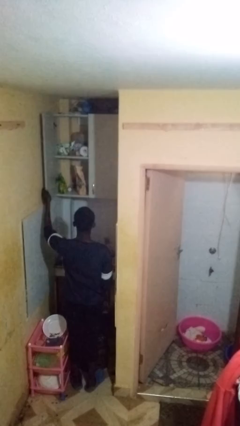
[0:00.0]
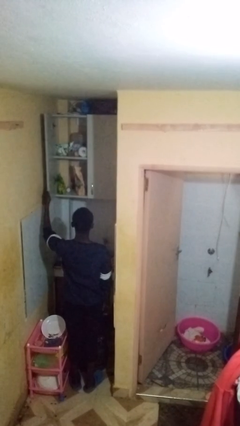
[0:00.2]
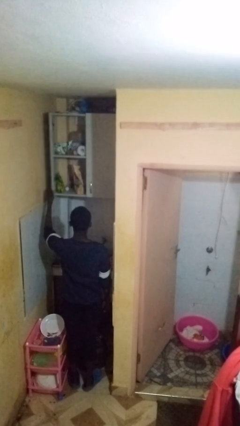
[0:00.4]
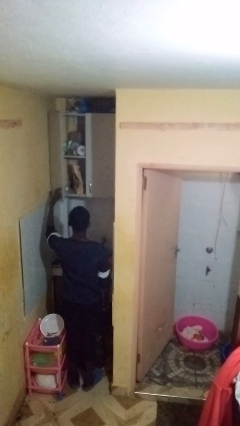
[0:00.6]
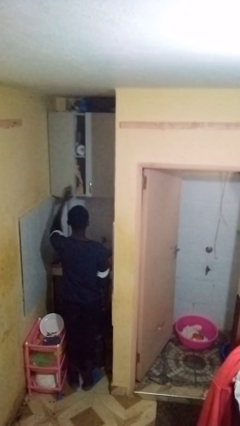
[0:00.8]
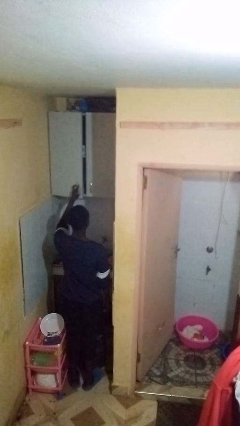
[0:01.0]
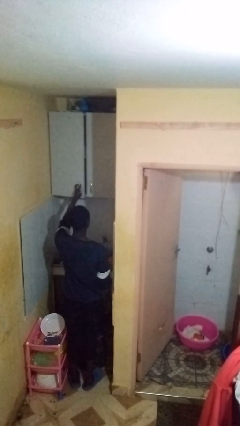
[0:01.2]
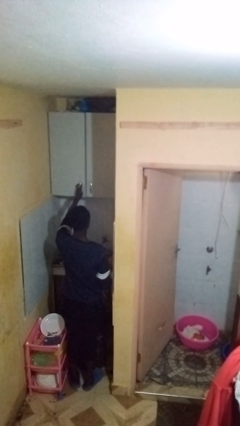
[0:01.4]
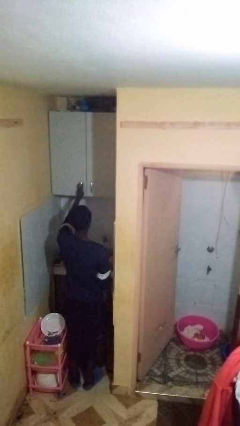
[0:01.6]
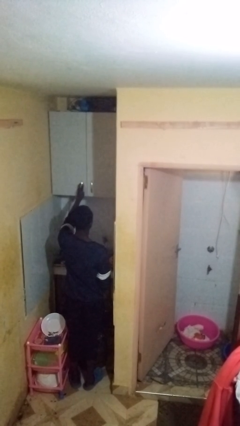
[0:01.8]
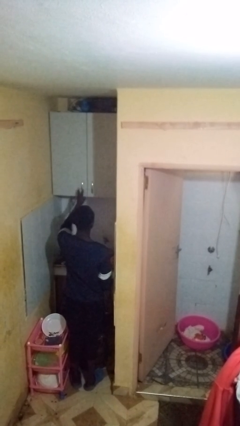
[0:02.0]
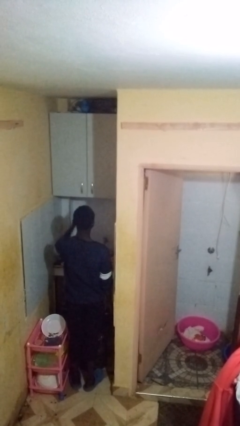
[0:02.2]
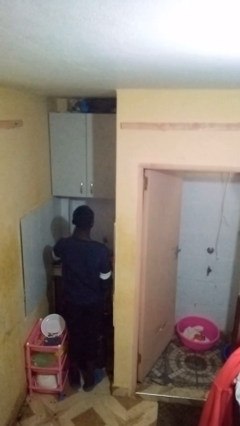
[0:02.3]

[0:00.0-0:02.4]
person closes cabinet

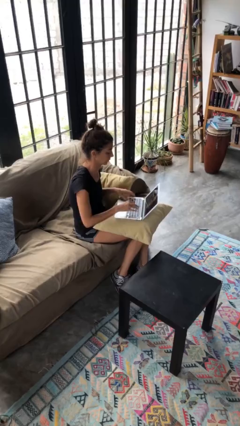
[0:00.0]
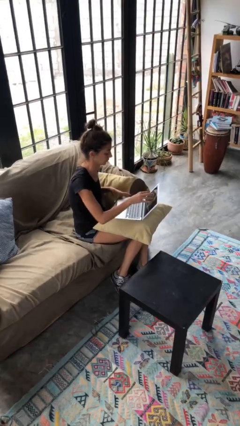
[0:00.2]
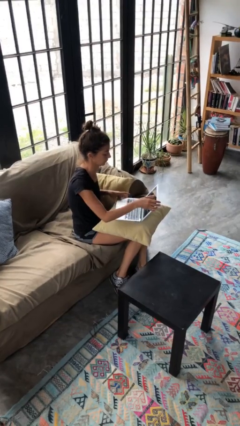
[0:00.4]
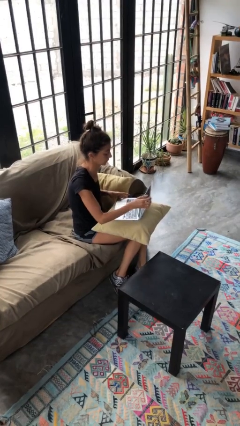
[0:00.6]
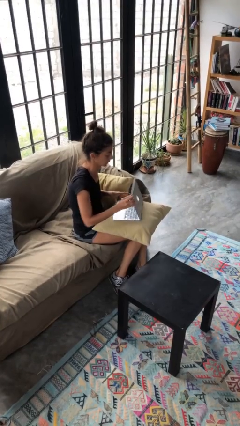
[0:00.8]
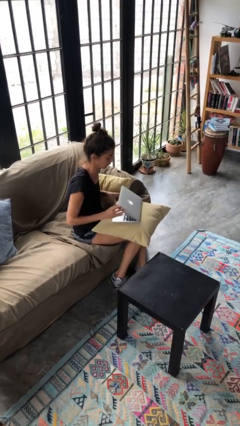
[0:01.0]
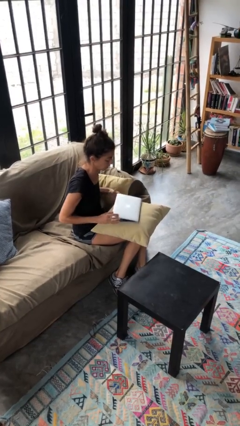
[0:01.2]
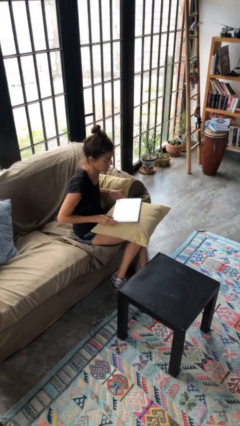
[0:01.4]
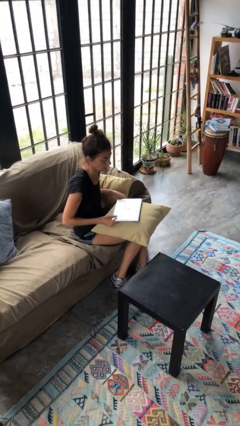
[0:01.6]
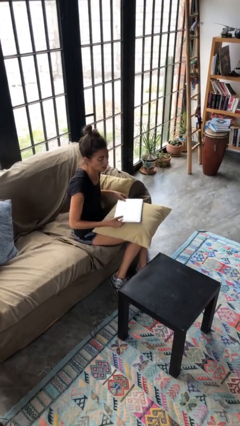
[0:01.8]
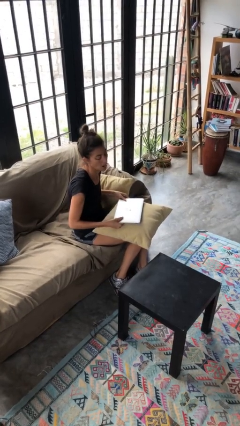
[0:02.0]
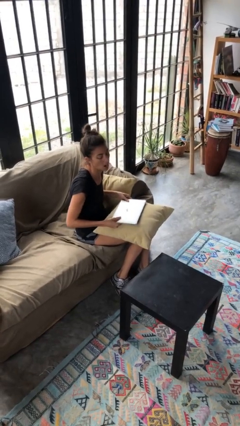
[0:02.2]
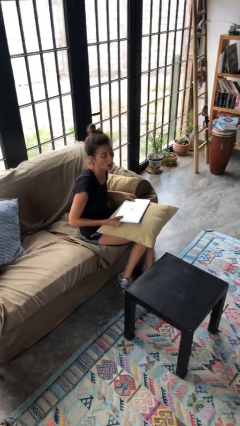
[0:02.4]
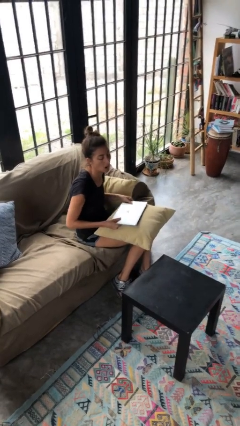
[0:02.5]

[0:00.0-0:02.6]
person closes laptop

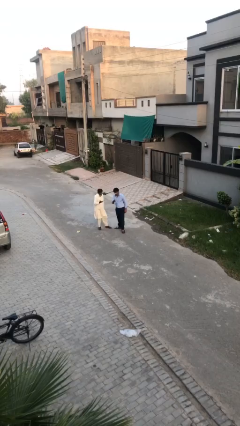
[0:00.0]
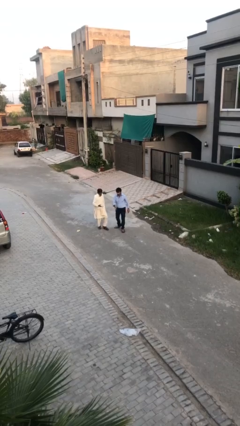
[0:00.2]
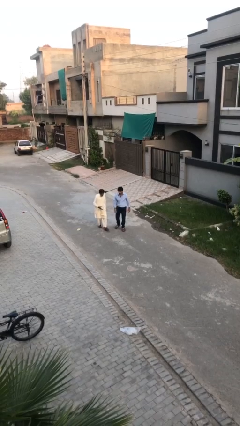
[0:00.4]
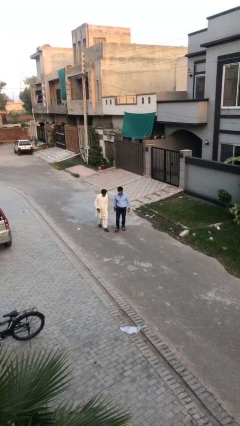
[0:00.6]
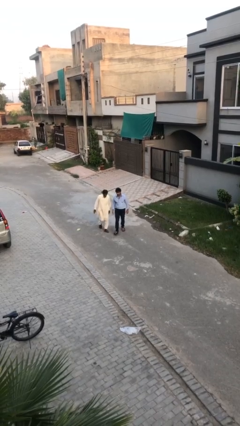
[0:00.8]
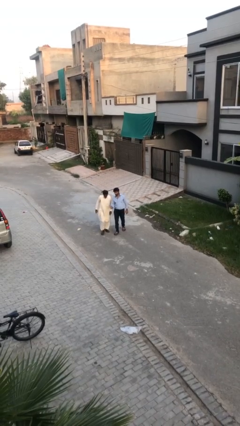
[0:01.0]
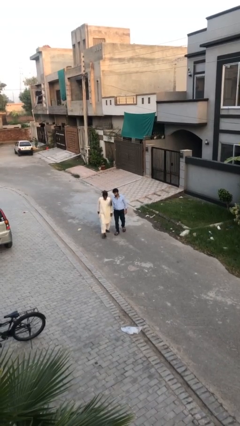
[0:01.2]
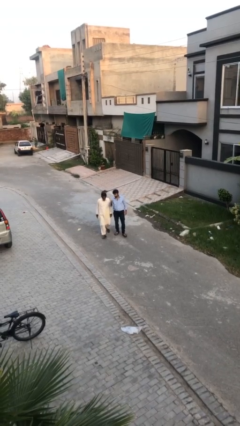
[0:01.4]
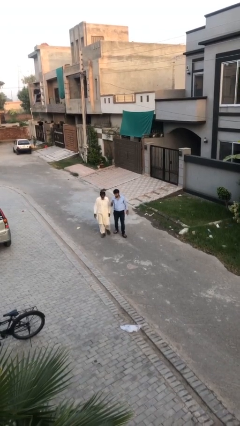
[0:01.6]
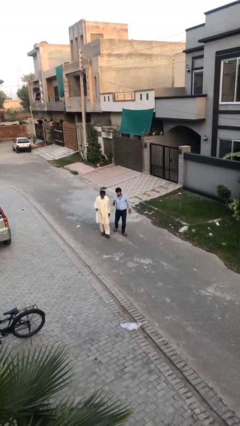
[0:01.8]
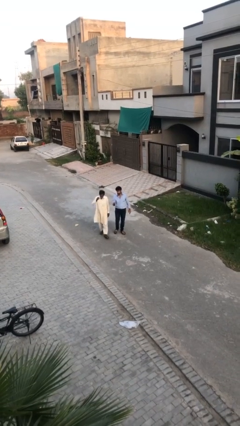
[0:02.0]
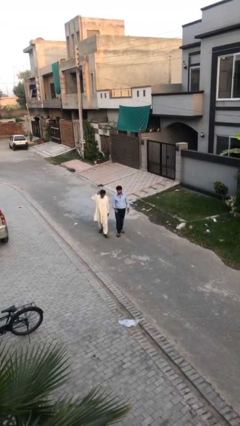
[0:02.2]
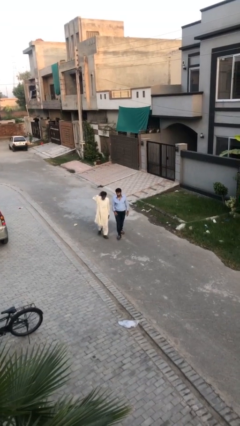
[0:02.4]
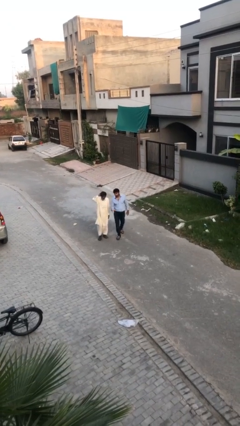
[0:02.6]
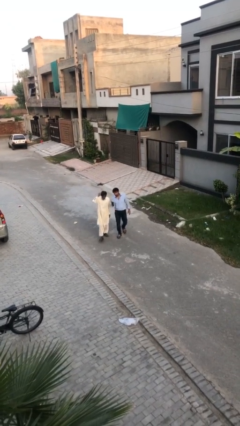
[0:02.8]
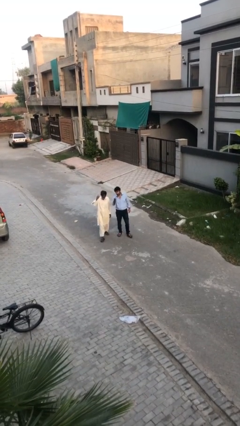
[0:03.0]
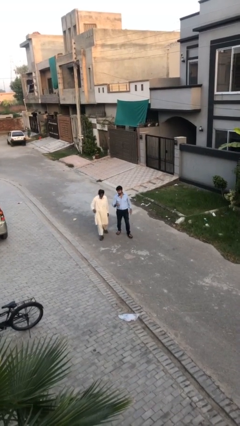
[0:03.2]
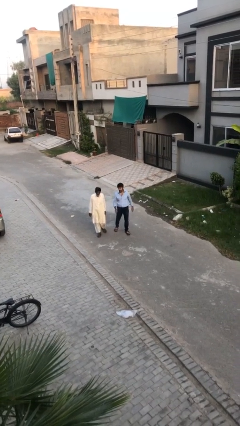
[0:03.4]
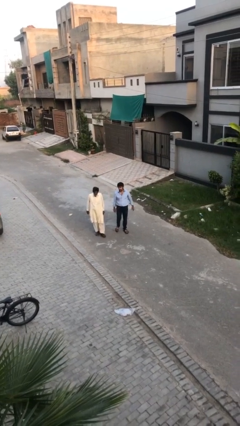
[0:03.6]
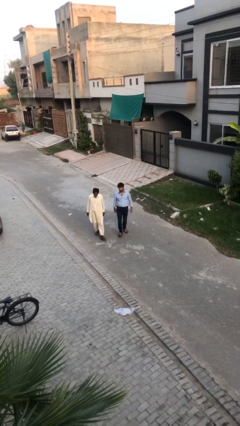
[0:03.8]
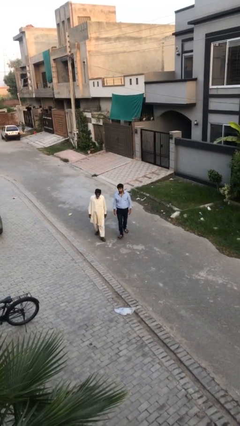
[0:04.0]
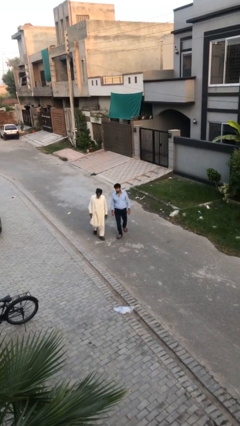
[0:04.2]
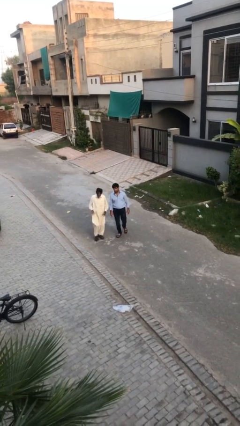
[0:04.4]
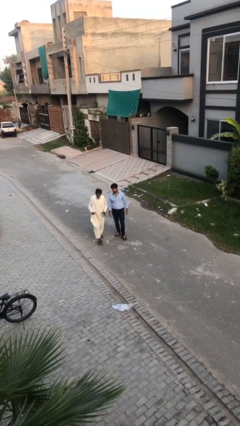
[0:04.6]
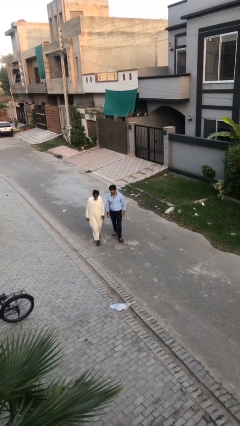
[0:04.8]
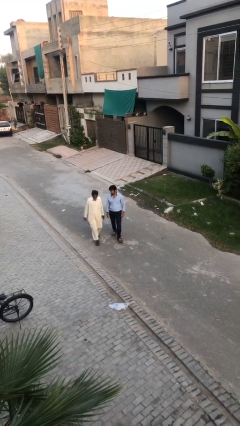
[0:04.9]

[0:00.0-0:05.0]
person talks to person

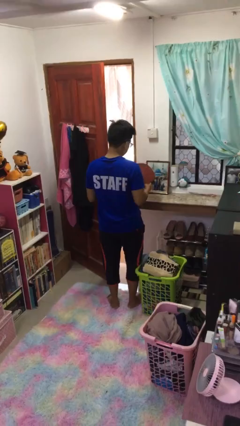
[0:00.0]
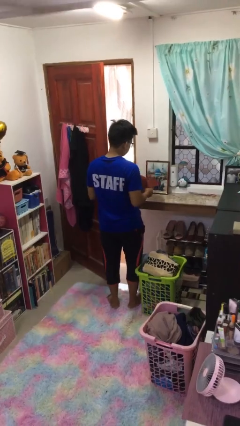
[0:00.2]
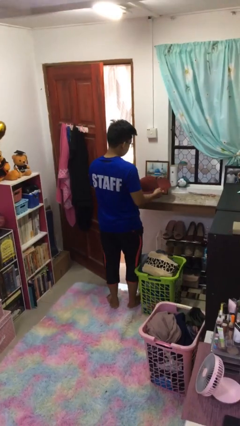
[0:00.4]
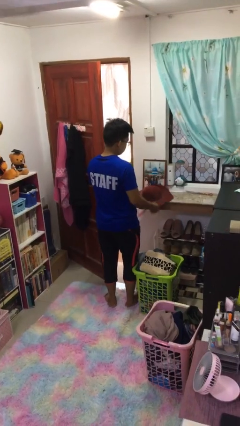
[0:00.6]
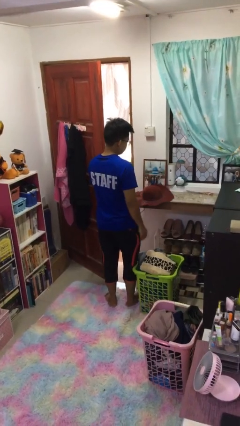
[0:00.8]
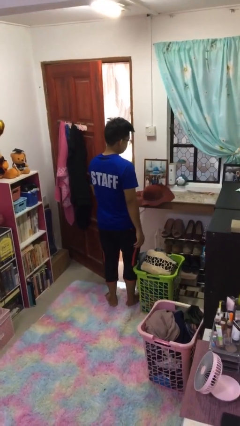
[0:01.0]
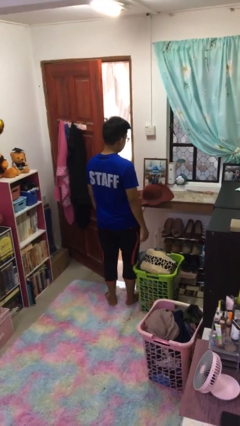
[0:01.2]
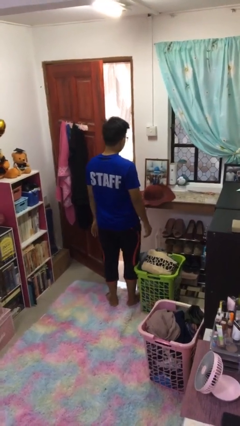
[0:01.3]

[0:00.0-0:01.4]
person puts down object on countertop

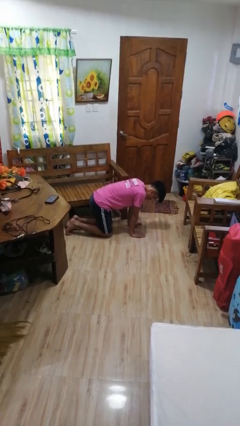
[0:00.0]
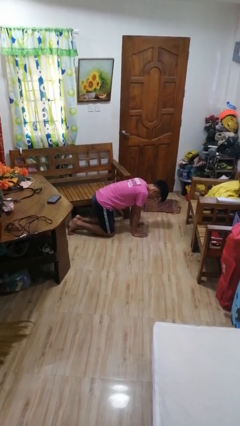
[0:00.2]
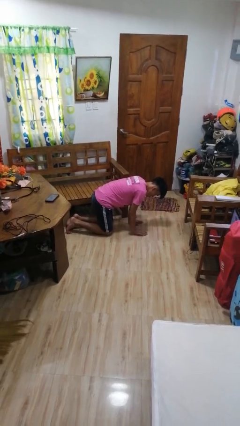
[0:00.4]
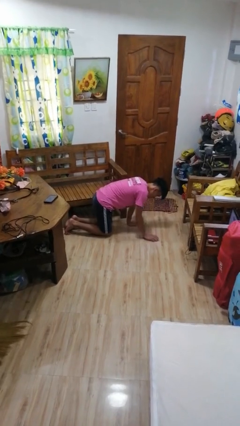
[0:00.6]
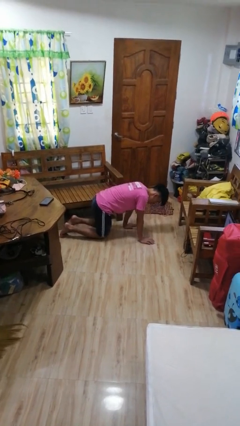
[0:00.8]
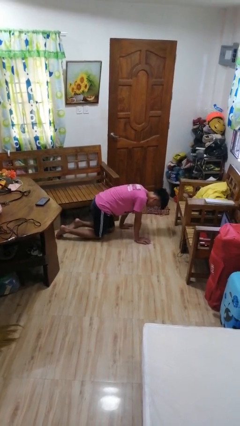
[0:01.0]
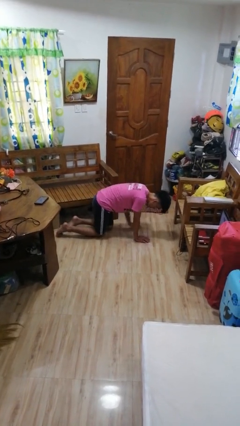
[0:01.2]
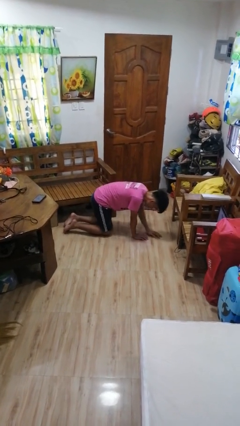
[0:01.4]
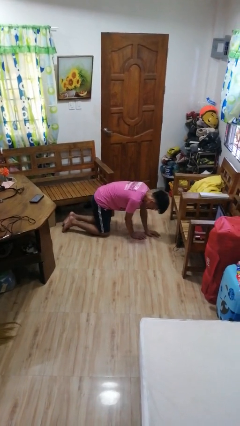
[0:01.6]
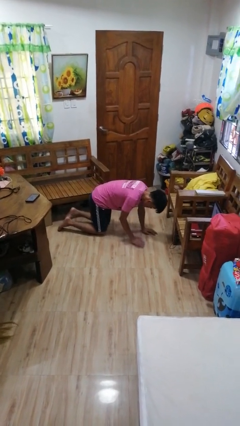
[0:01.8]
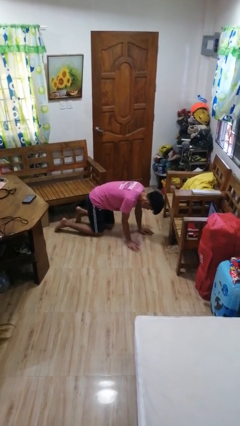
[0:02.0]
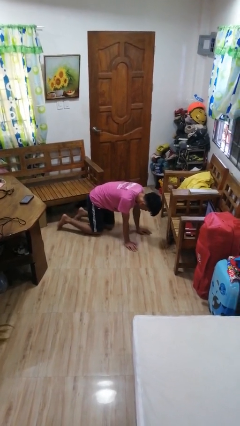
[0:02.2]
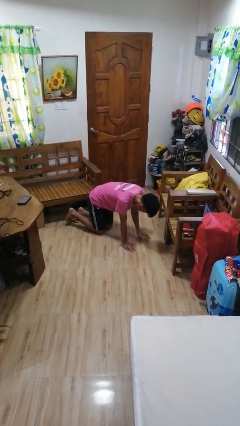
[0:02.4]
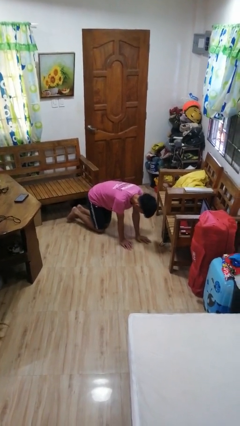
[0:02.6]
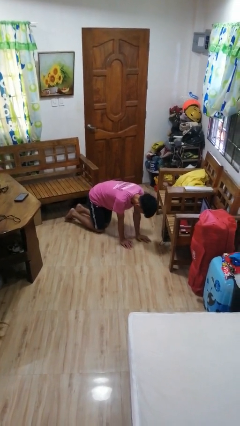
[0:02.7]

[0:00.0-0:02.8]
person crawls

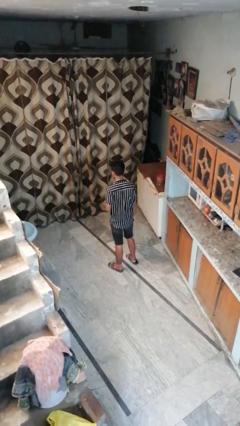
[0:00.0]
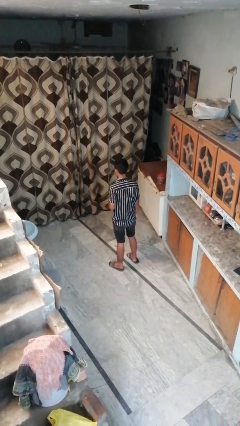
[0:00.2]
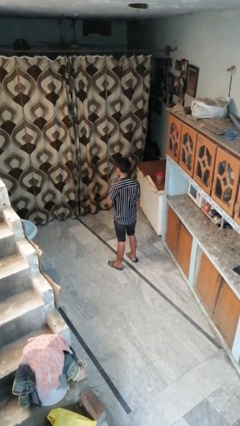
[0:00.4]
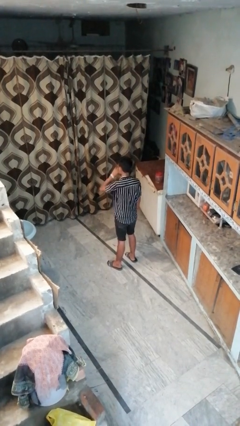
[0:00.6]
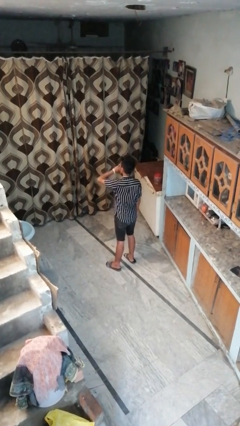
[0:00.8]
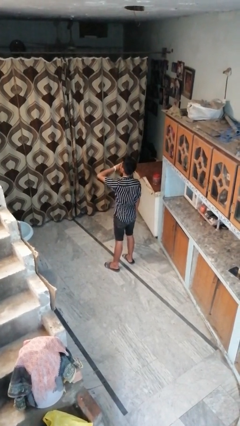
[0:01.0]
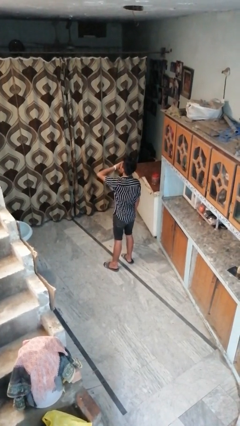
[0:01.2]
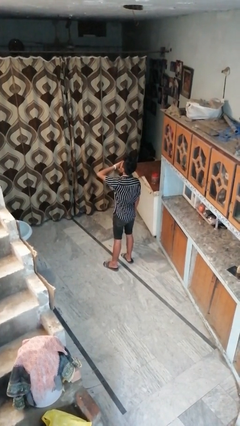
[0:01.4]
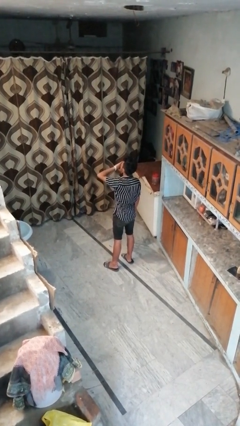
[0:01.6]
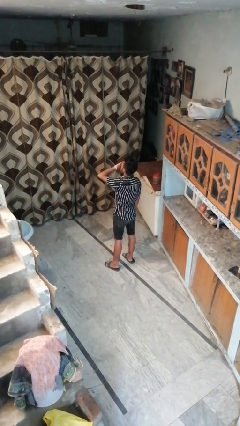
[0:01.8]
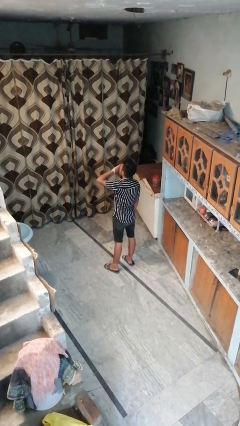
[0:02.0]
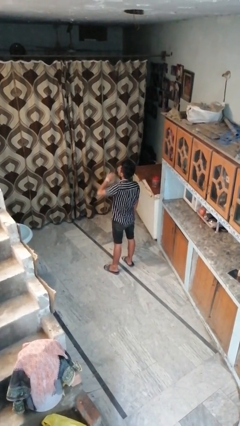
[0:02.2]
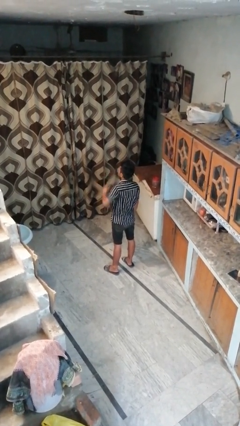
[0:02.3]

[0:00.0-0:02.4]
person yawns

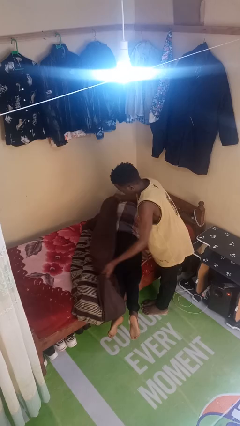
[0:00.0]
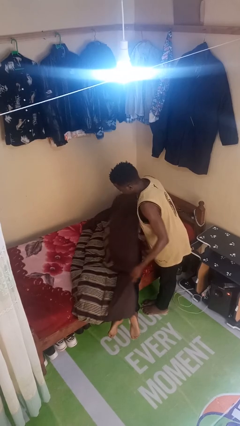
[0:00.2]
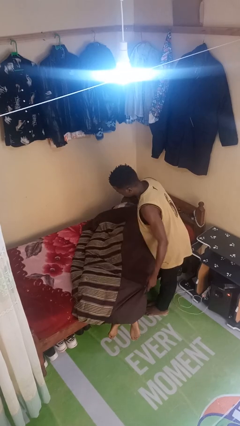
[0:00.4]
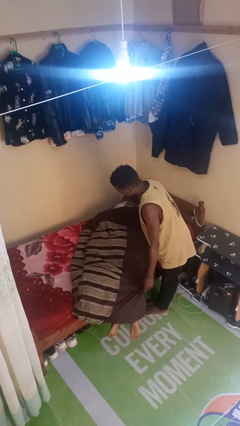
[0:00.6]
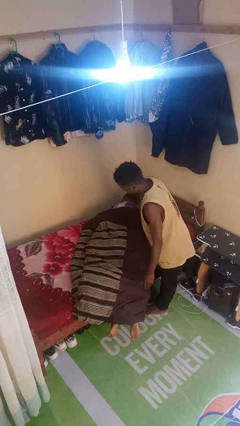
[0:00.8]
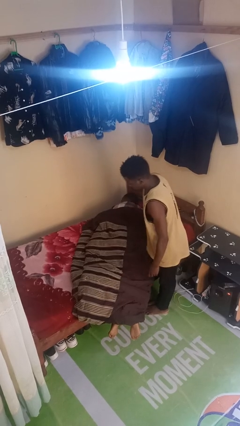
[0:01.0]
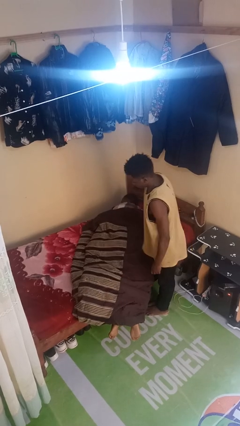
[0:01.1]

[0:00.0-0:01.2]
person covers friend with blanket
